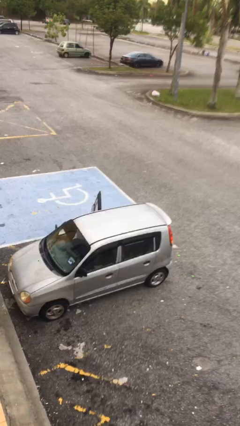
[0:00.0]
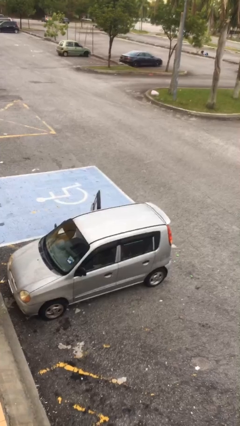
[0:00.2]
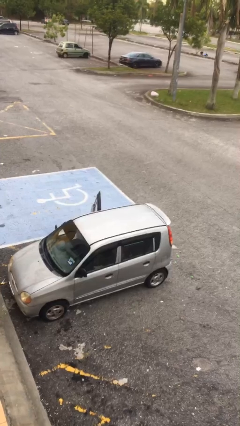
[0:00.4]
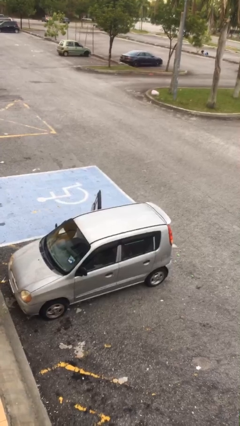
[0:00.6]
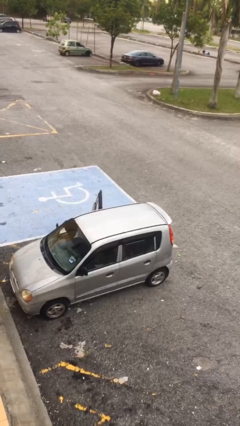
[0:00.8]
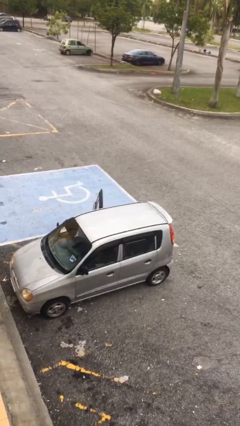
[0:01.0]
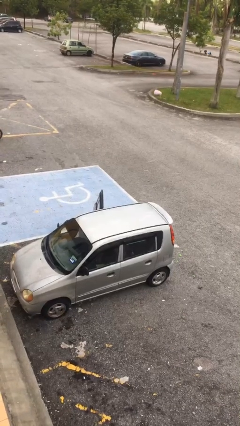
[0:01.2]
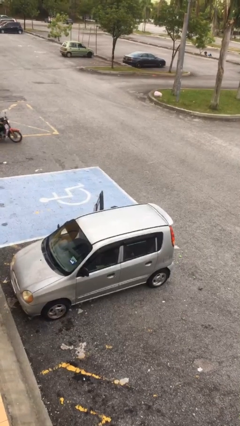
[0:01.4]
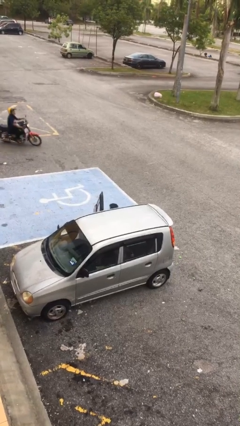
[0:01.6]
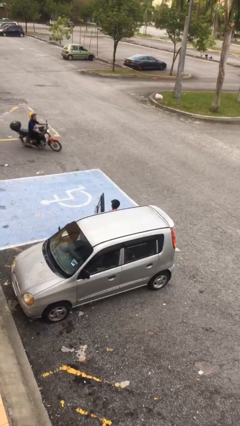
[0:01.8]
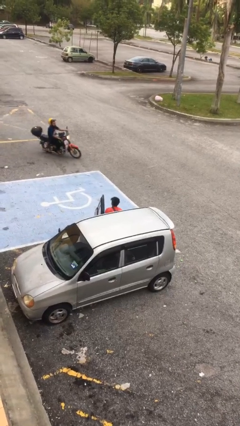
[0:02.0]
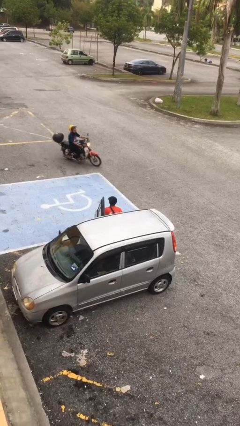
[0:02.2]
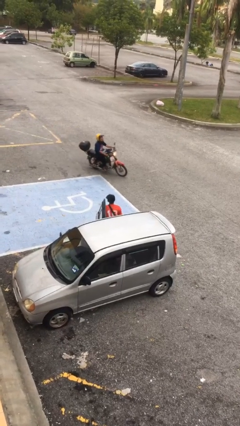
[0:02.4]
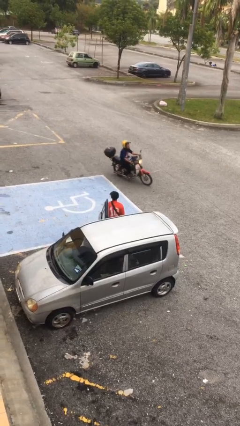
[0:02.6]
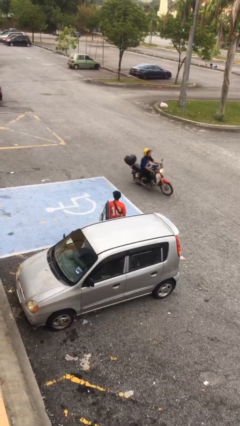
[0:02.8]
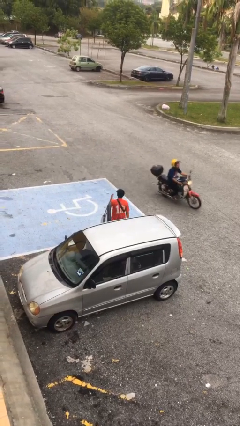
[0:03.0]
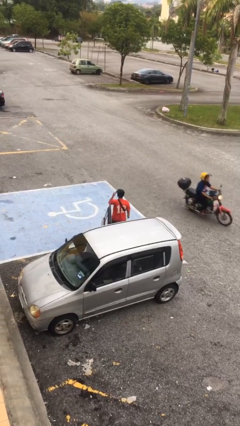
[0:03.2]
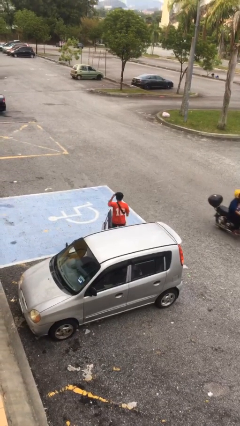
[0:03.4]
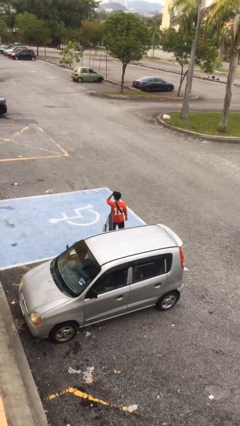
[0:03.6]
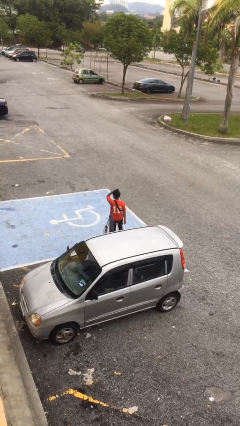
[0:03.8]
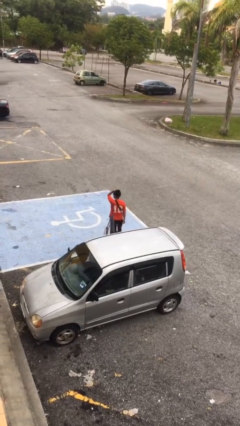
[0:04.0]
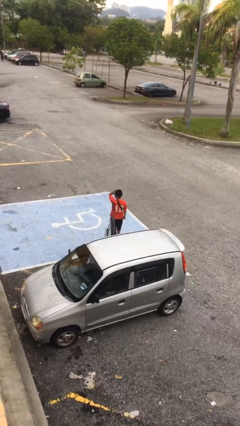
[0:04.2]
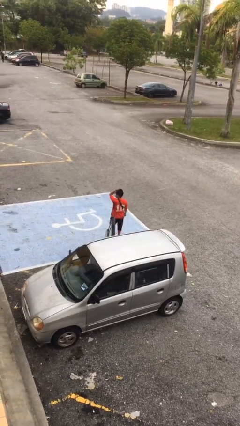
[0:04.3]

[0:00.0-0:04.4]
person exits car

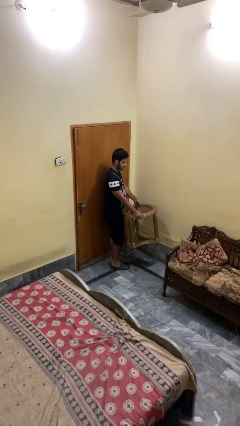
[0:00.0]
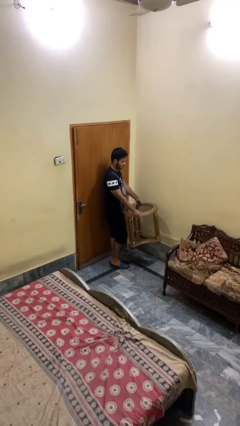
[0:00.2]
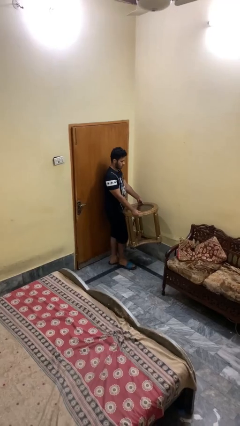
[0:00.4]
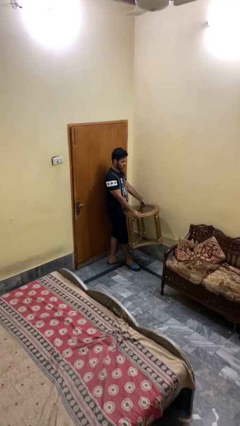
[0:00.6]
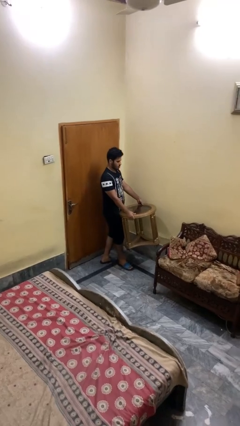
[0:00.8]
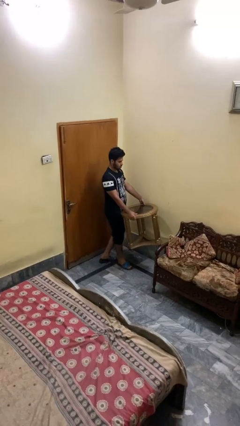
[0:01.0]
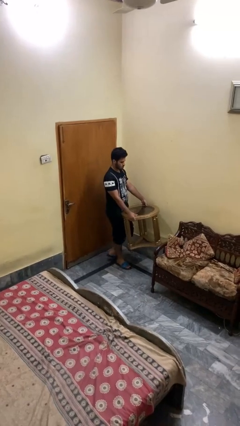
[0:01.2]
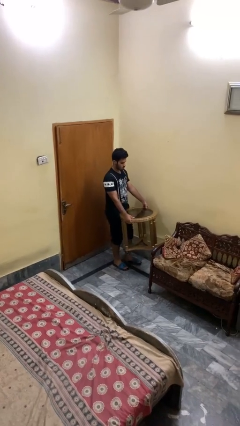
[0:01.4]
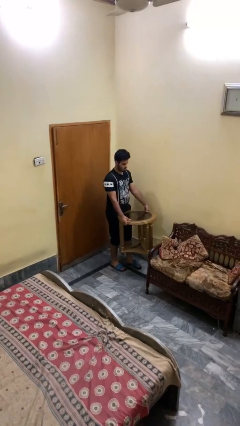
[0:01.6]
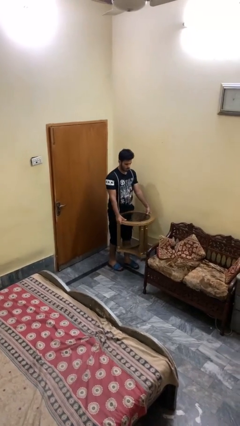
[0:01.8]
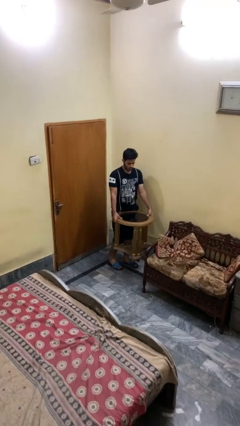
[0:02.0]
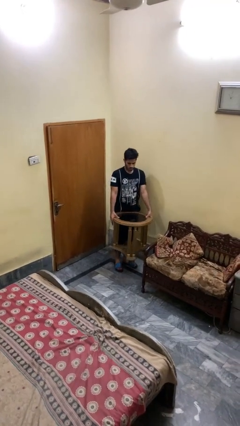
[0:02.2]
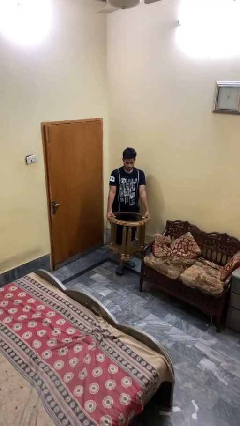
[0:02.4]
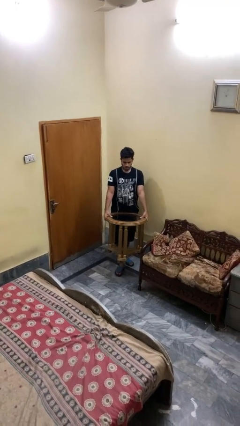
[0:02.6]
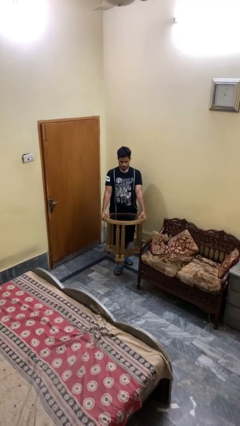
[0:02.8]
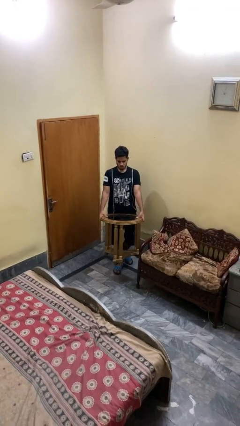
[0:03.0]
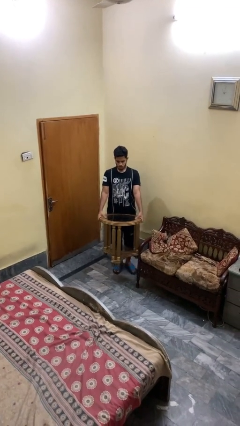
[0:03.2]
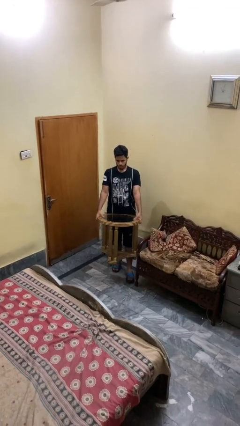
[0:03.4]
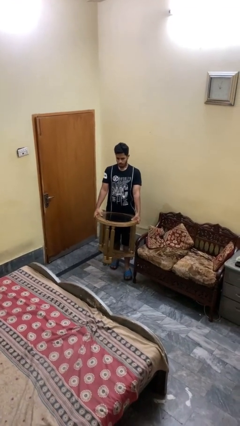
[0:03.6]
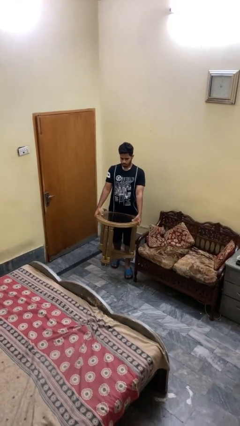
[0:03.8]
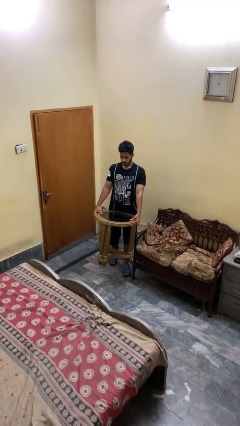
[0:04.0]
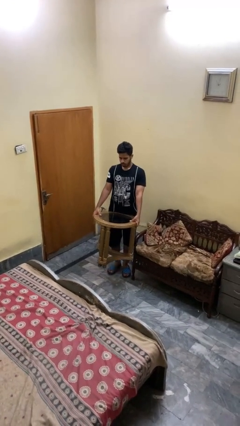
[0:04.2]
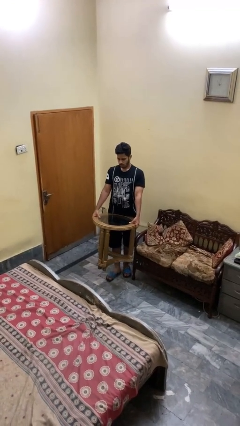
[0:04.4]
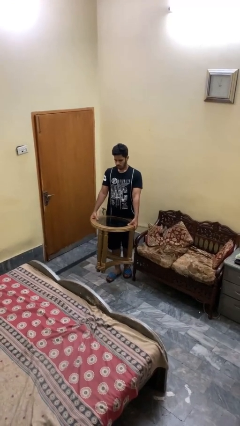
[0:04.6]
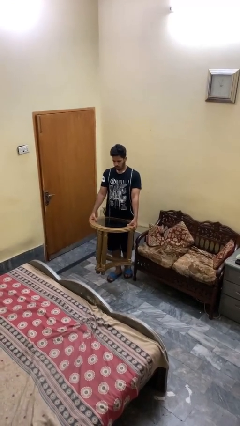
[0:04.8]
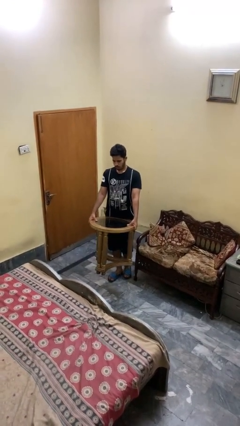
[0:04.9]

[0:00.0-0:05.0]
person carries furniture

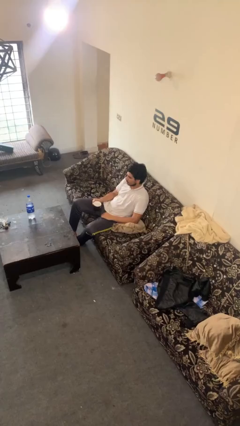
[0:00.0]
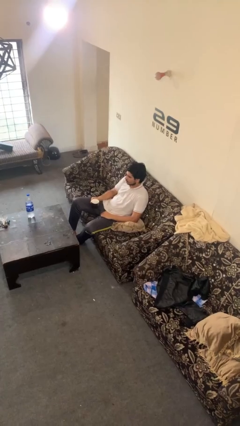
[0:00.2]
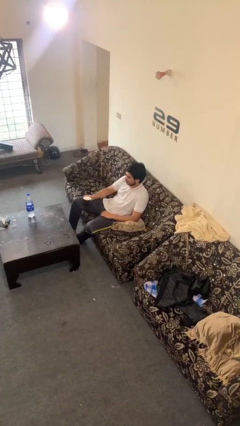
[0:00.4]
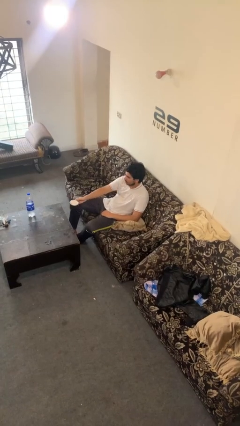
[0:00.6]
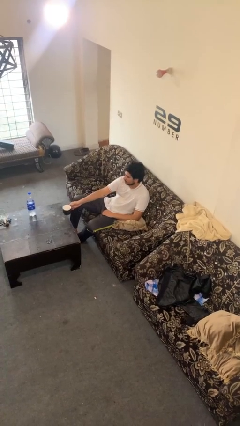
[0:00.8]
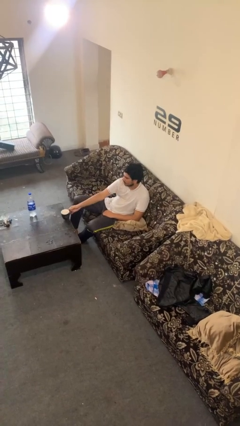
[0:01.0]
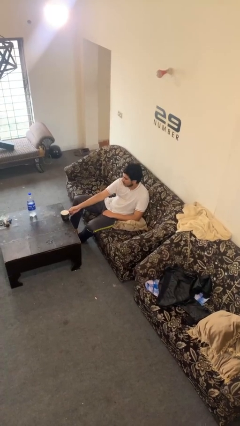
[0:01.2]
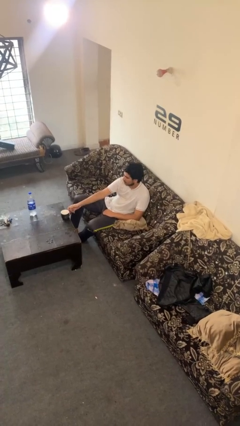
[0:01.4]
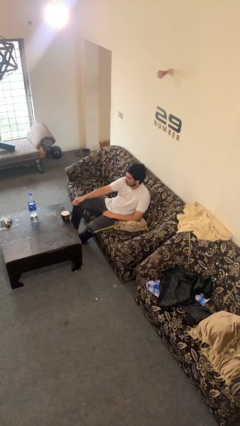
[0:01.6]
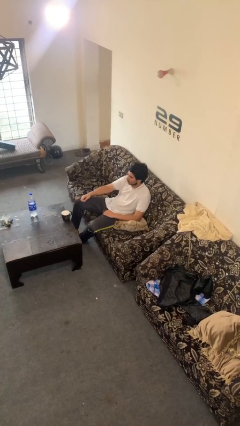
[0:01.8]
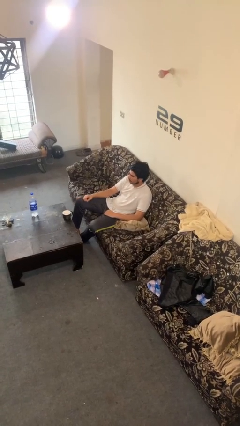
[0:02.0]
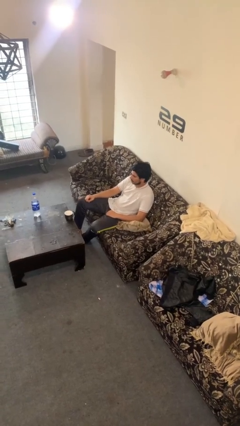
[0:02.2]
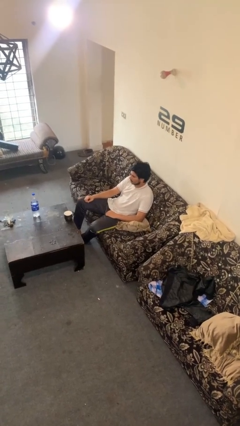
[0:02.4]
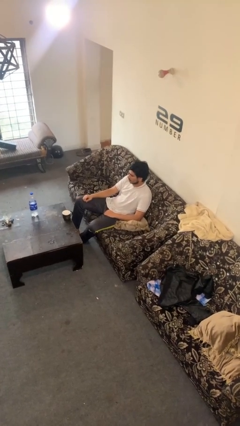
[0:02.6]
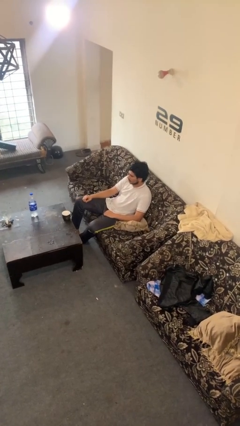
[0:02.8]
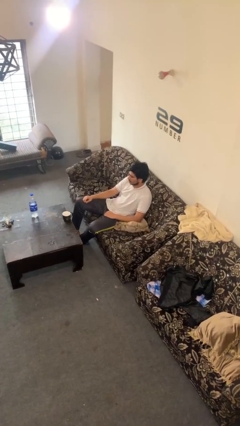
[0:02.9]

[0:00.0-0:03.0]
person puts down object on table

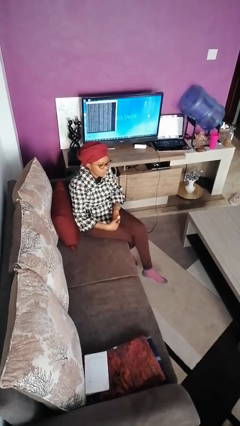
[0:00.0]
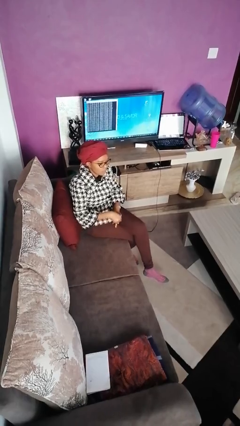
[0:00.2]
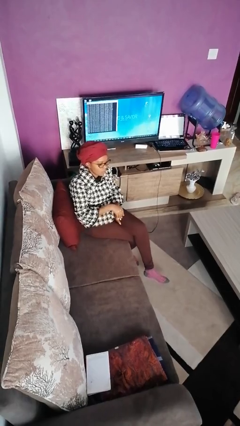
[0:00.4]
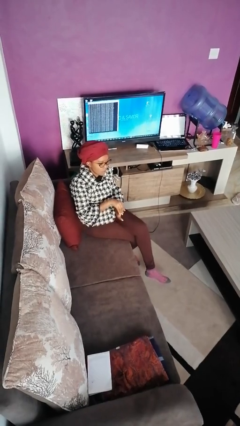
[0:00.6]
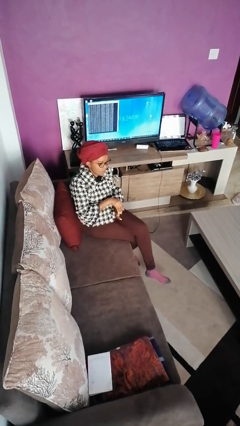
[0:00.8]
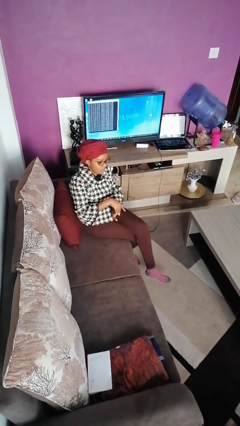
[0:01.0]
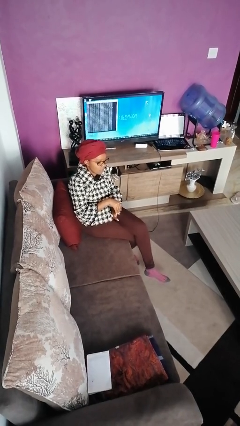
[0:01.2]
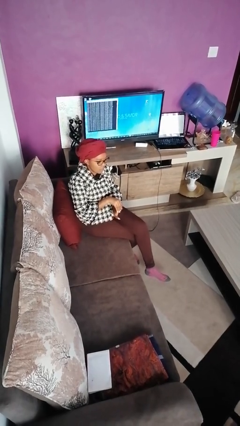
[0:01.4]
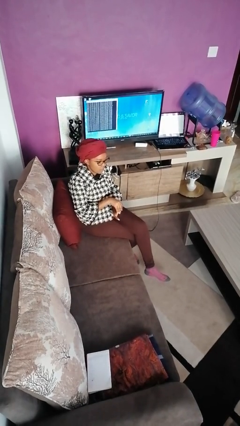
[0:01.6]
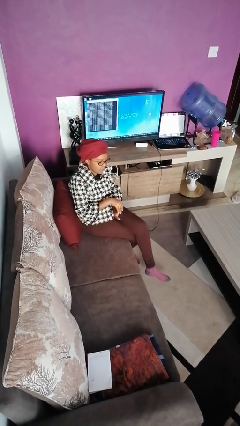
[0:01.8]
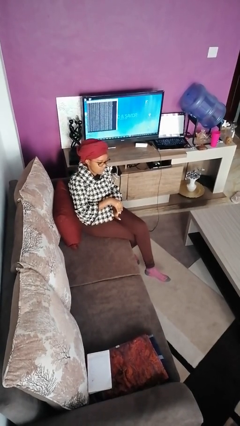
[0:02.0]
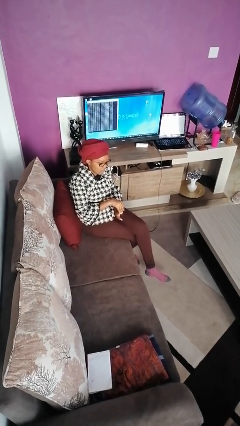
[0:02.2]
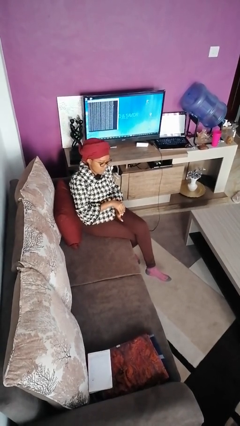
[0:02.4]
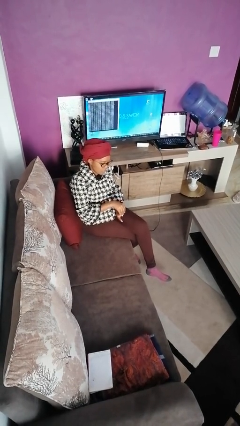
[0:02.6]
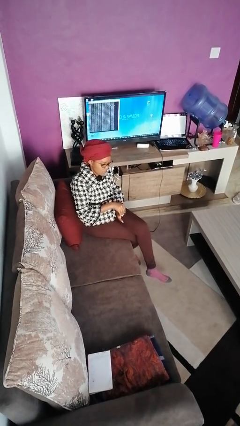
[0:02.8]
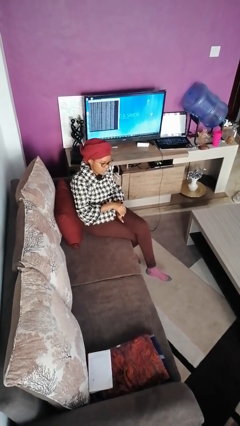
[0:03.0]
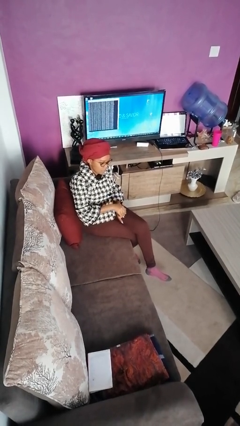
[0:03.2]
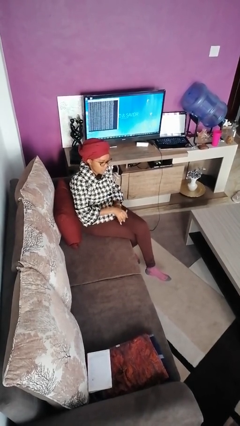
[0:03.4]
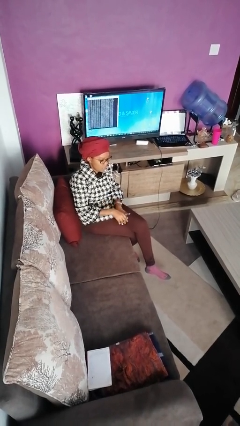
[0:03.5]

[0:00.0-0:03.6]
person cracks knuckles

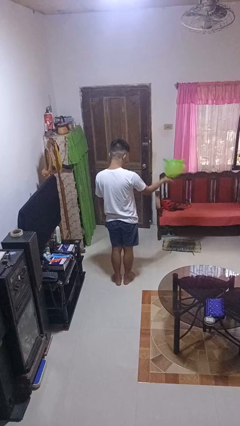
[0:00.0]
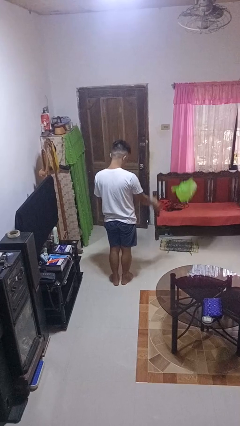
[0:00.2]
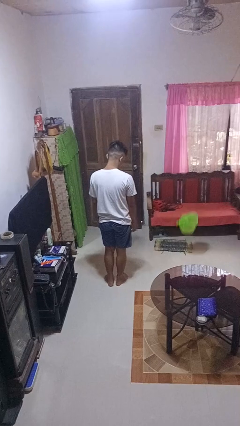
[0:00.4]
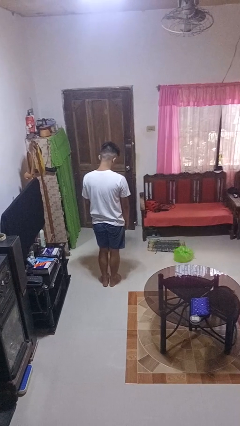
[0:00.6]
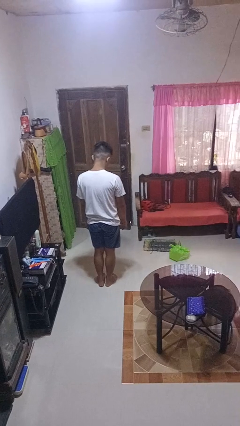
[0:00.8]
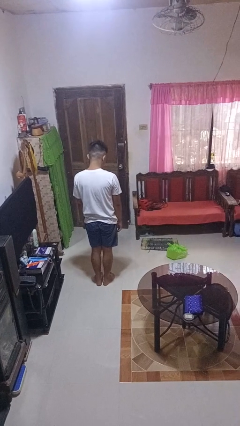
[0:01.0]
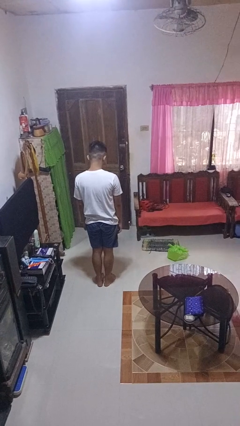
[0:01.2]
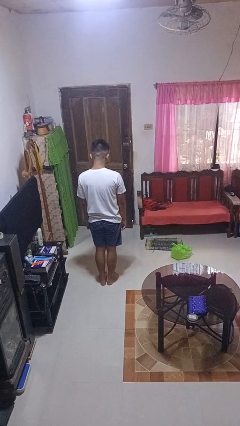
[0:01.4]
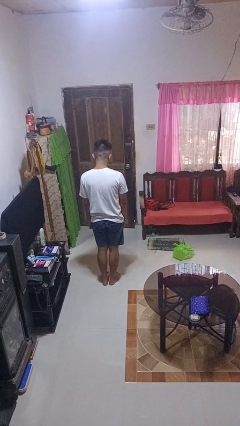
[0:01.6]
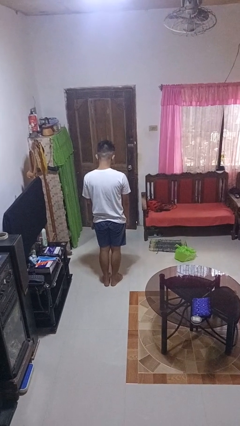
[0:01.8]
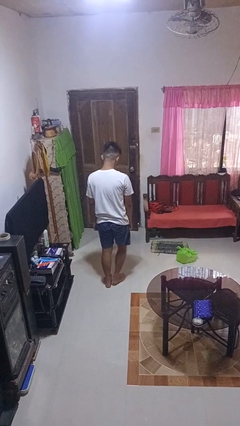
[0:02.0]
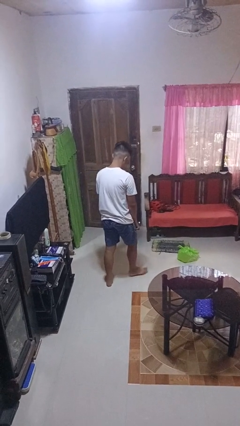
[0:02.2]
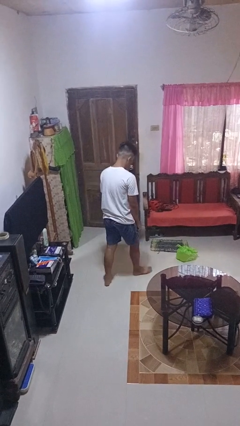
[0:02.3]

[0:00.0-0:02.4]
person throws object to ground
